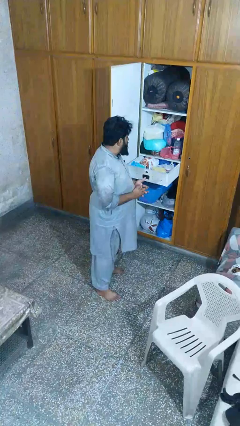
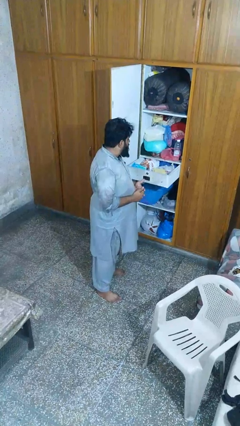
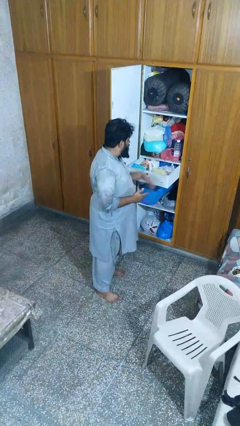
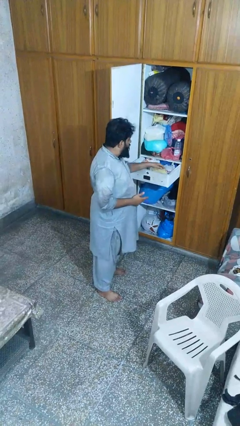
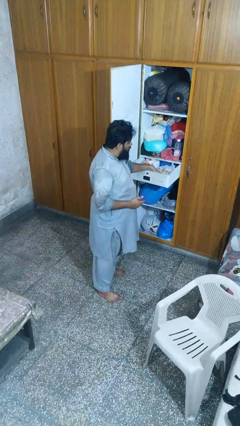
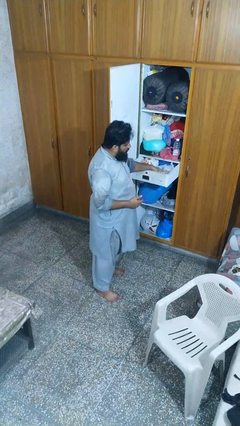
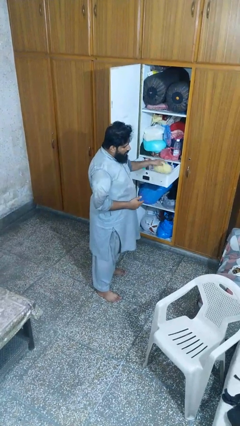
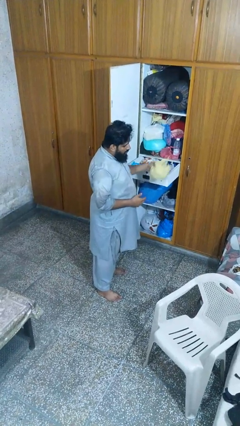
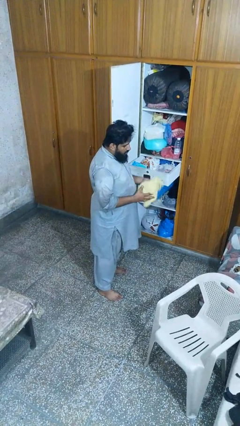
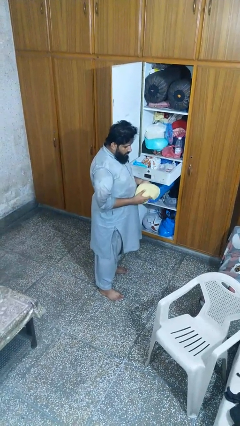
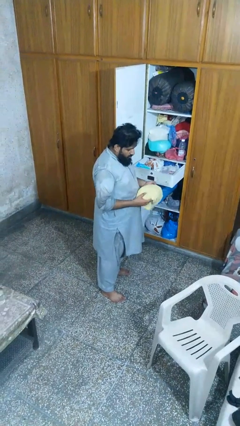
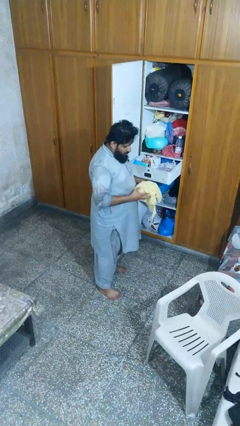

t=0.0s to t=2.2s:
person takes clothes from dresser

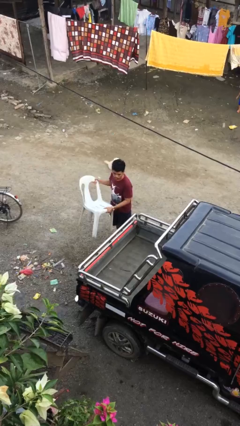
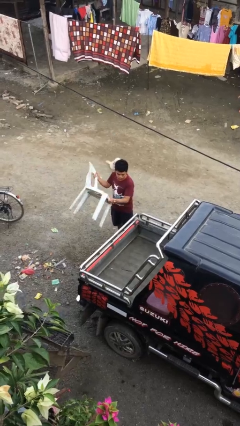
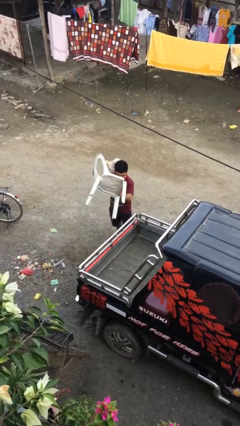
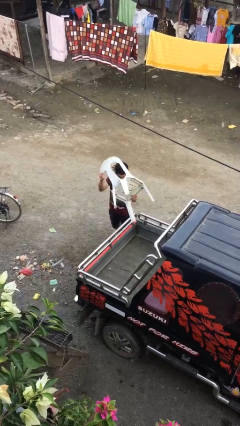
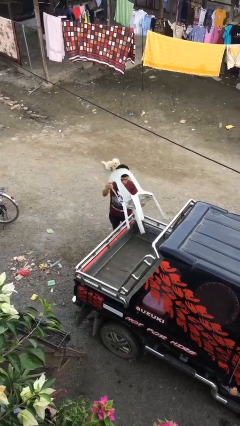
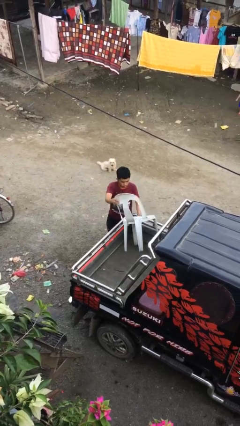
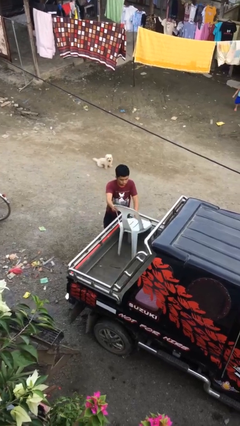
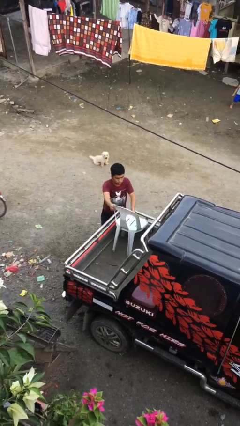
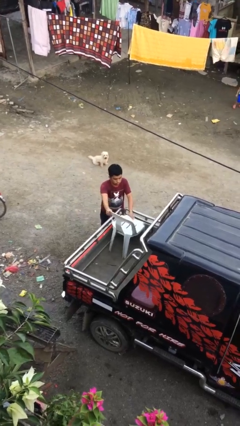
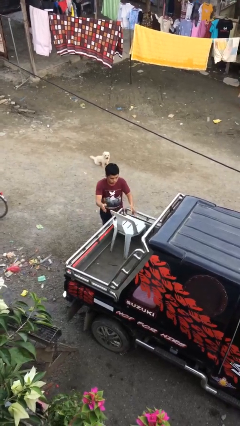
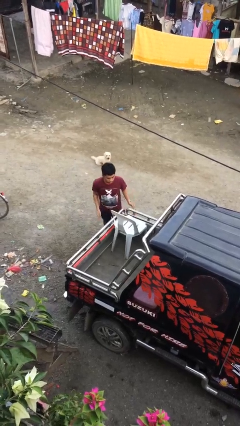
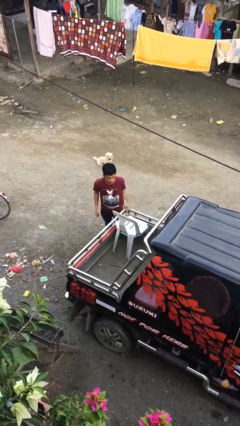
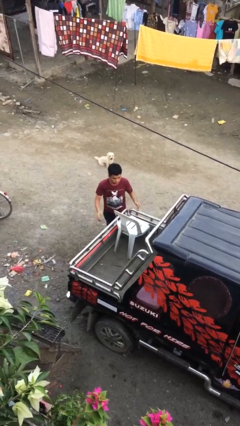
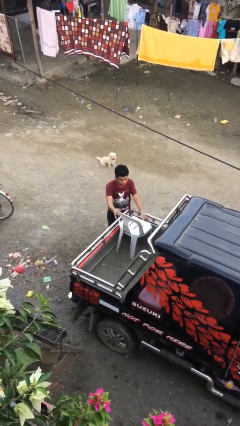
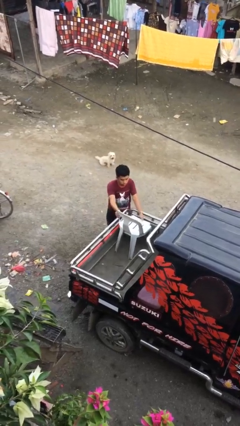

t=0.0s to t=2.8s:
person loads car

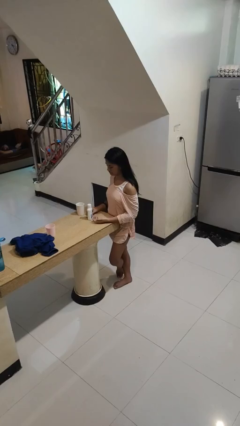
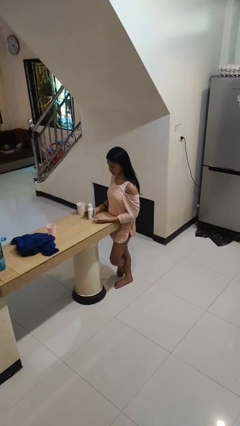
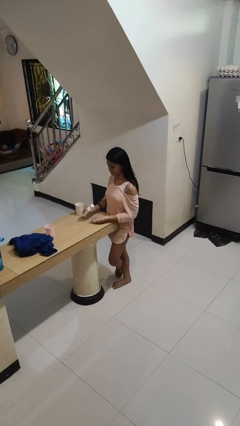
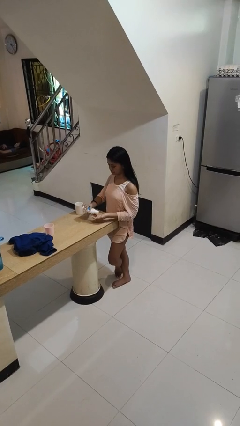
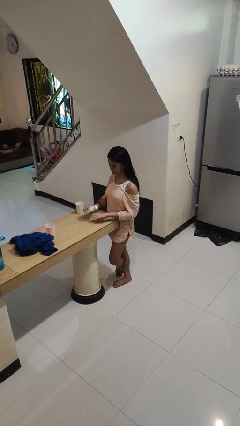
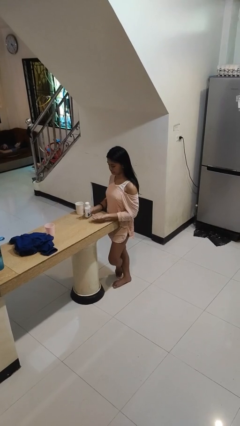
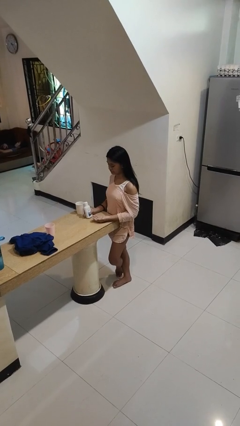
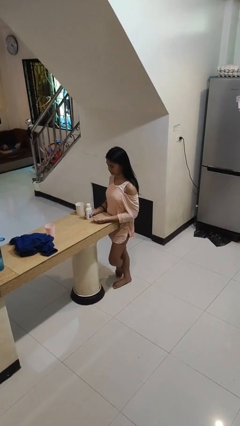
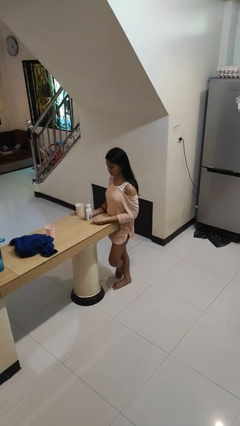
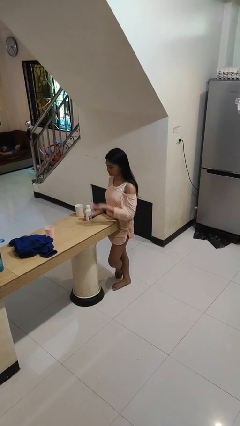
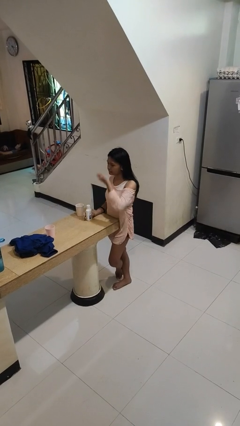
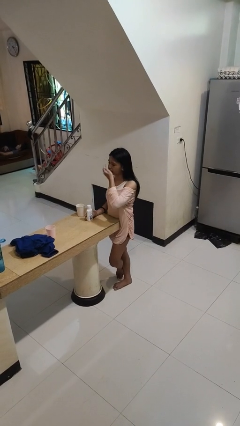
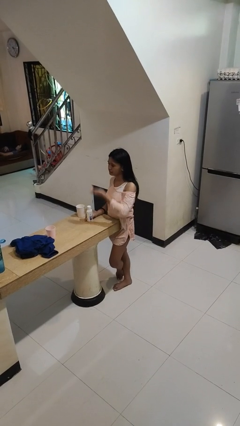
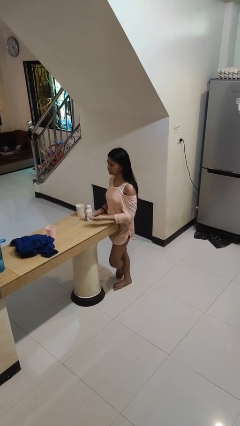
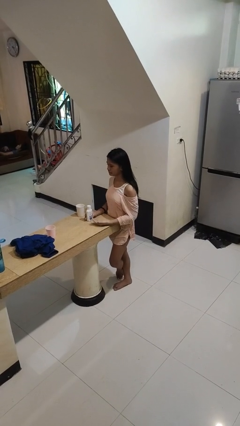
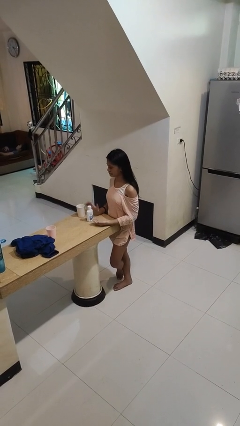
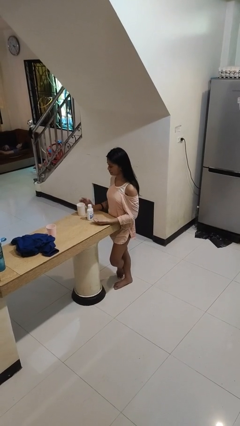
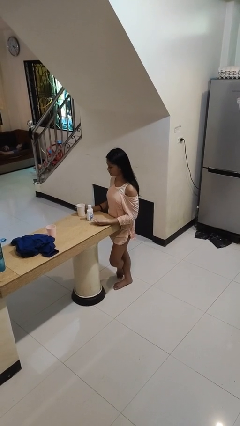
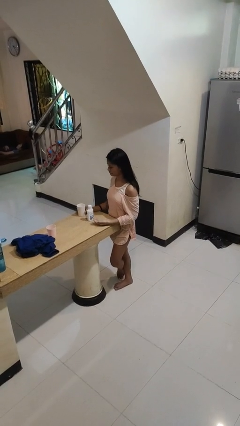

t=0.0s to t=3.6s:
person takes medicine pills

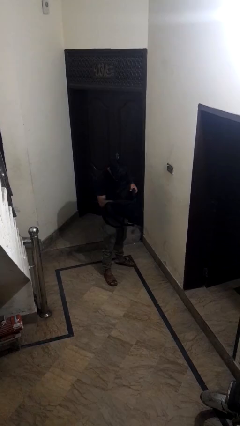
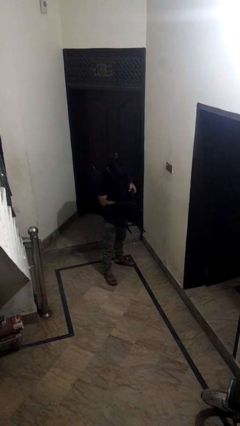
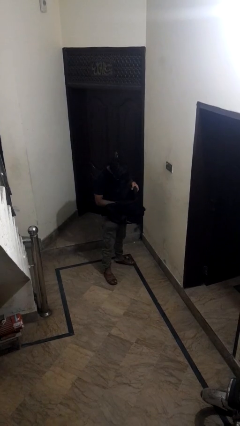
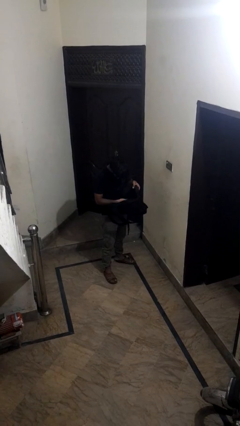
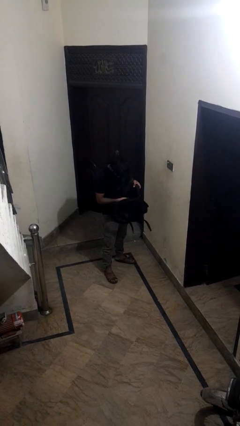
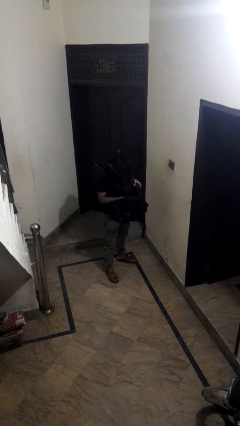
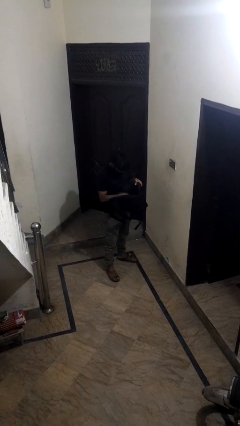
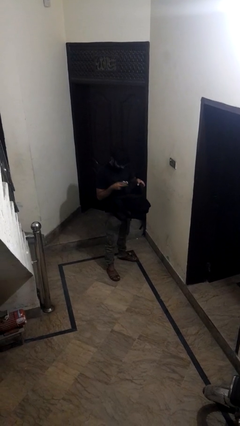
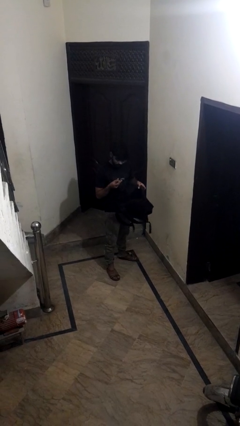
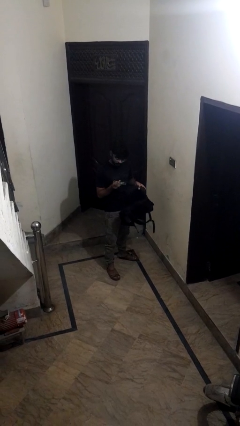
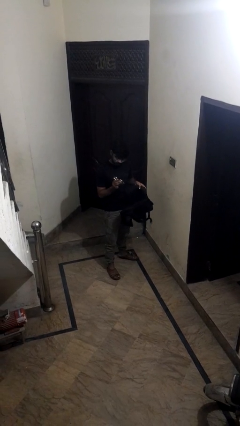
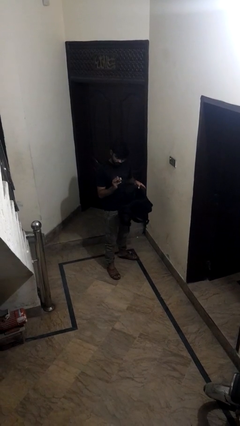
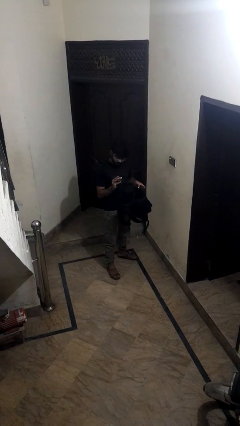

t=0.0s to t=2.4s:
person takes object from backpack

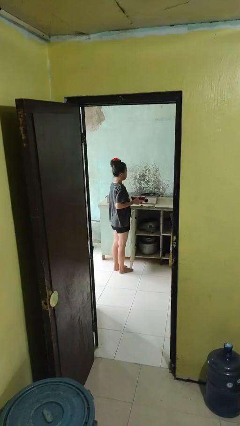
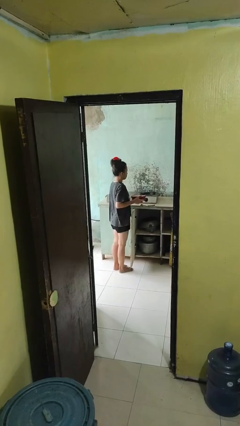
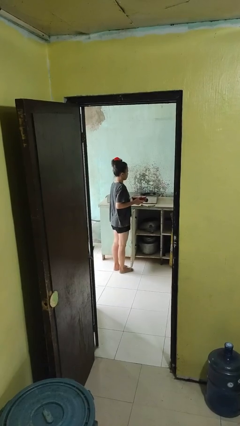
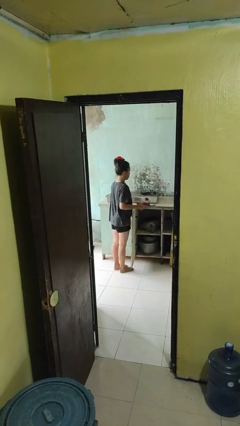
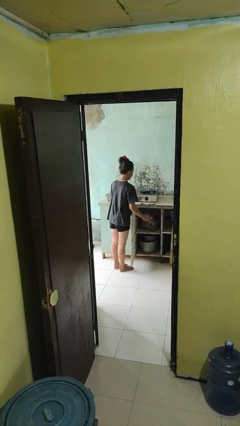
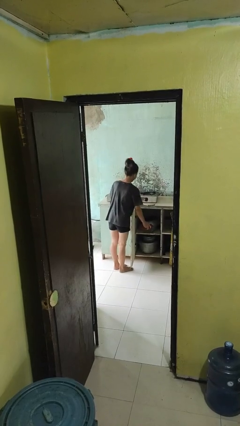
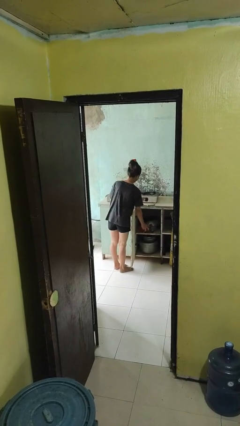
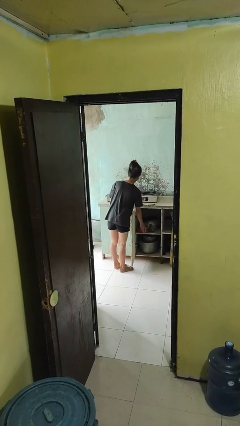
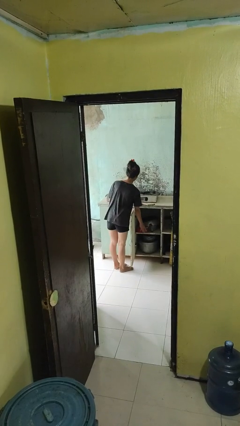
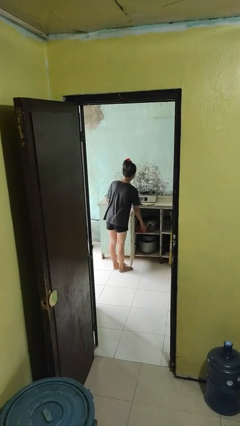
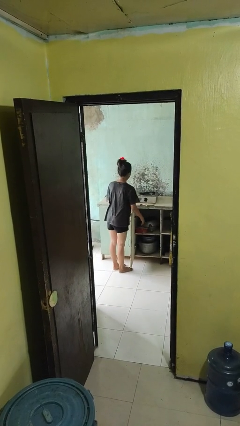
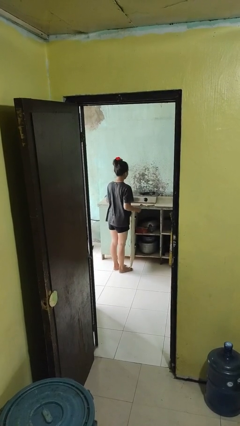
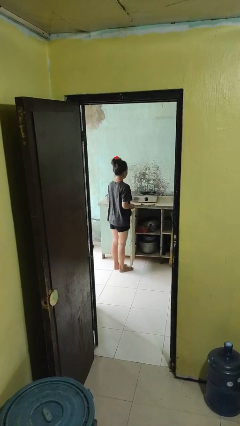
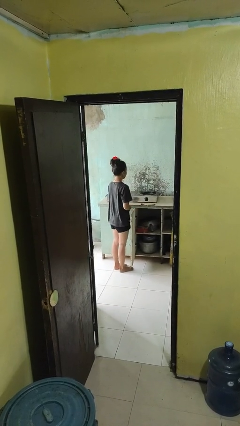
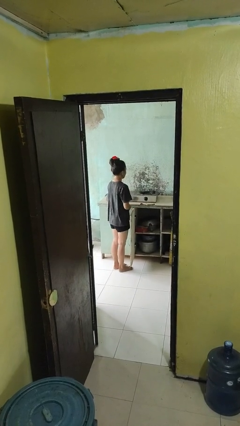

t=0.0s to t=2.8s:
person puts object in cabinet

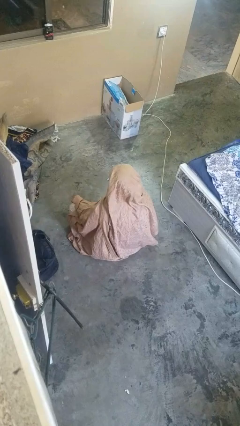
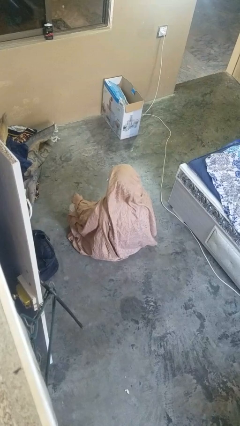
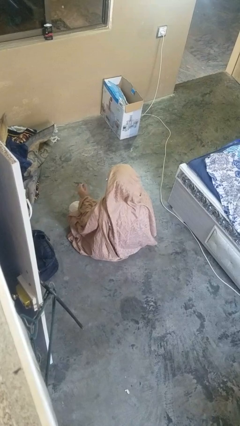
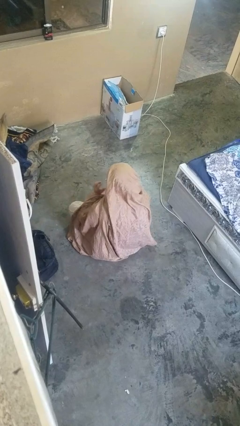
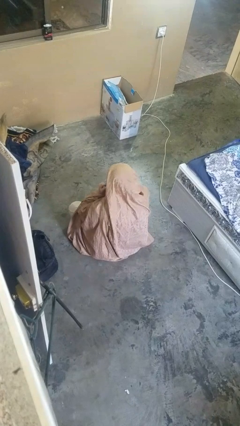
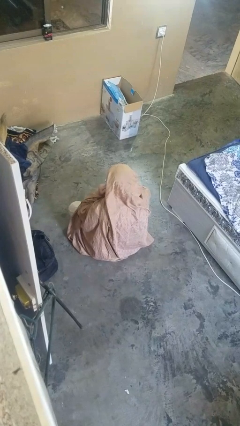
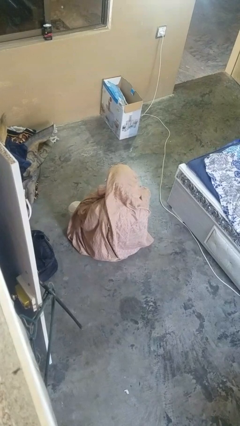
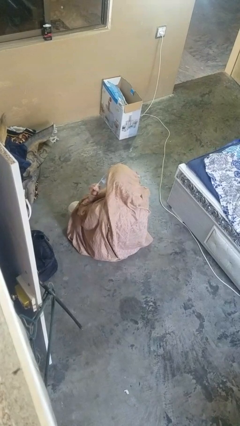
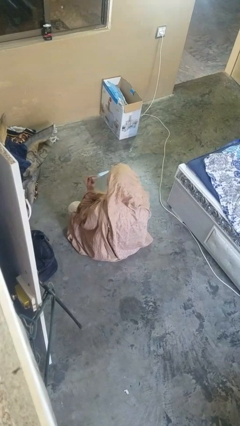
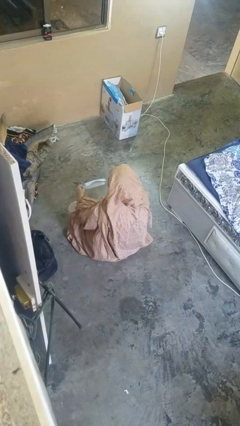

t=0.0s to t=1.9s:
person takes off facemask

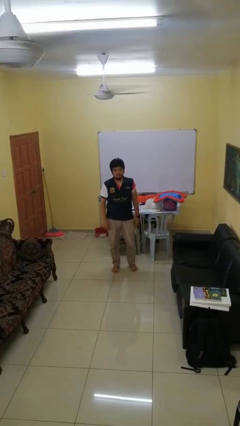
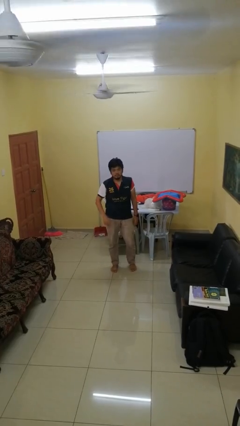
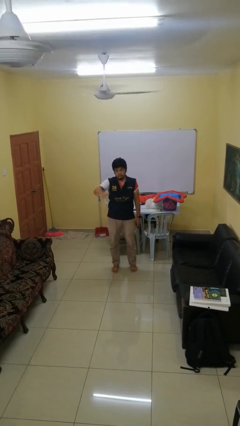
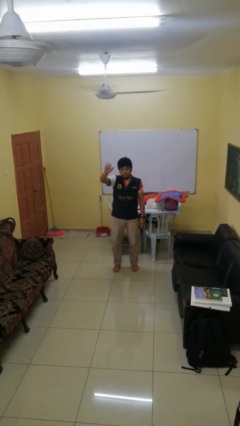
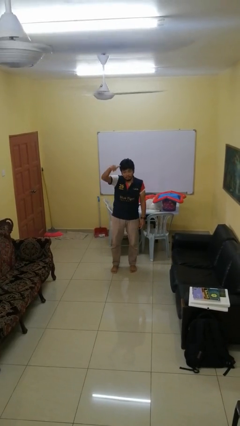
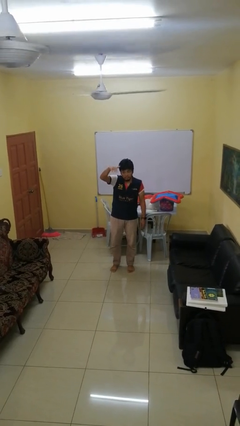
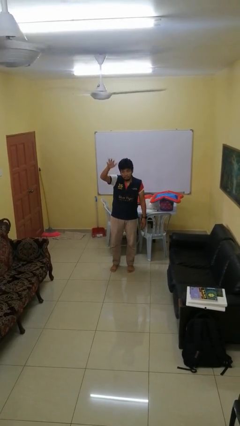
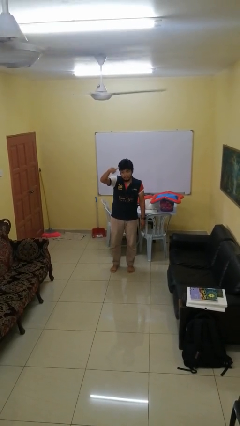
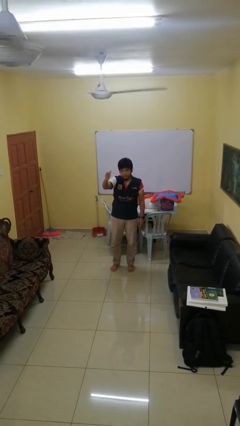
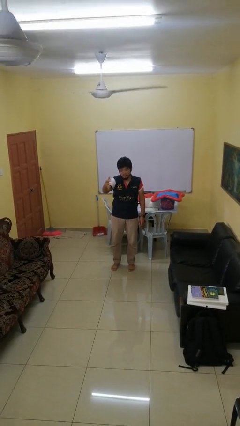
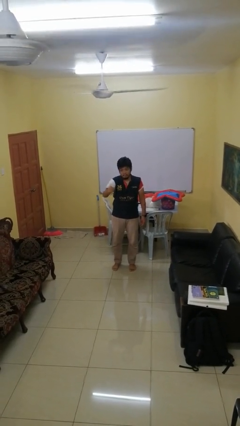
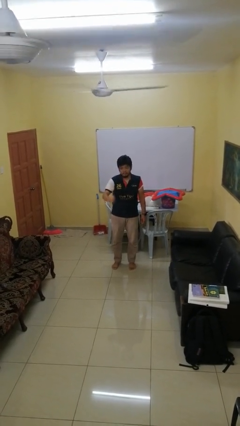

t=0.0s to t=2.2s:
person gestures come here
